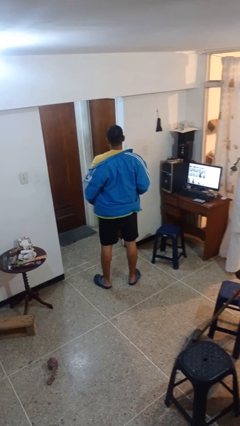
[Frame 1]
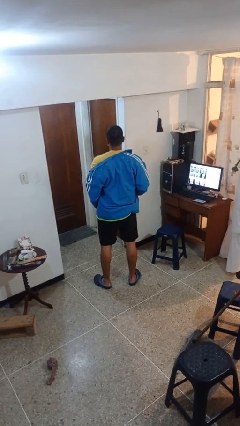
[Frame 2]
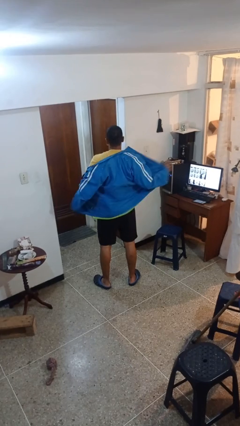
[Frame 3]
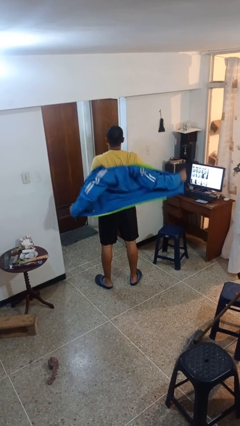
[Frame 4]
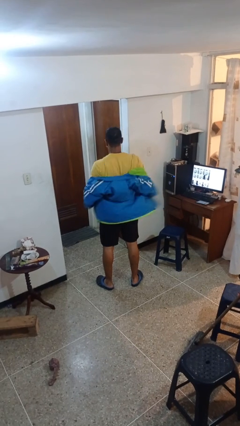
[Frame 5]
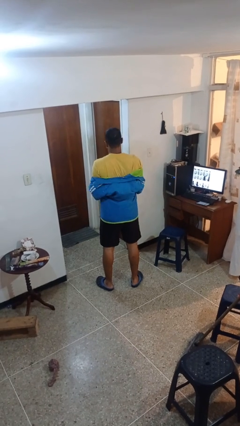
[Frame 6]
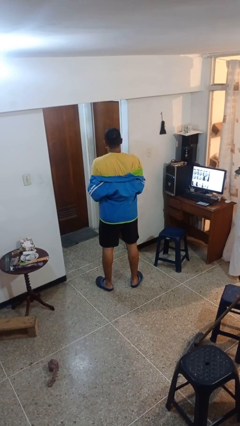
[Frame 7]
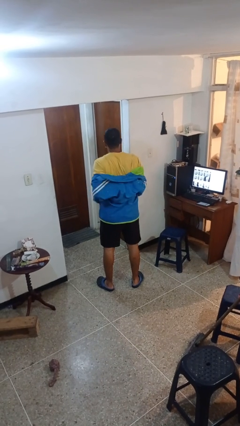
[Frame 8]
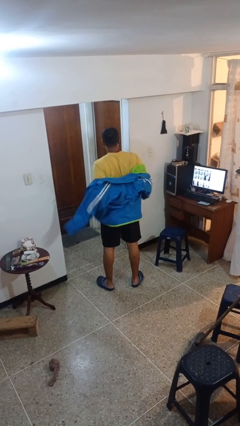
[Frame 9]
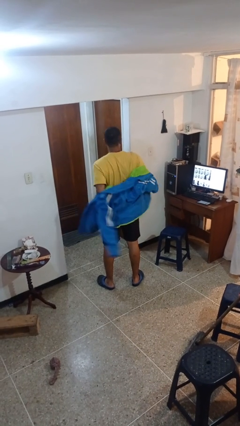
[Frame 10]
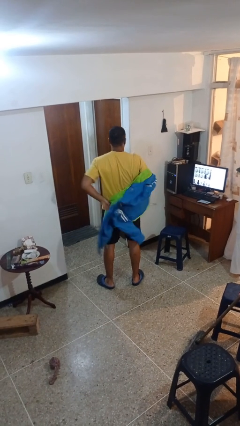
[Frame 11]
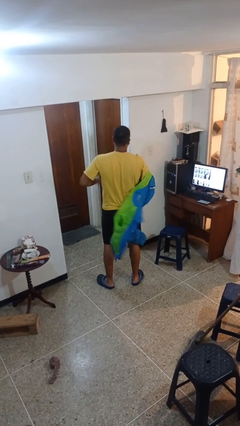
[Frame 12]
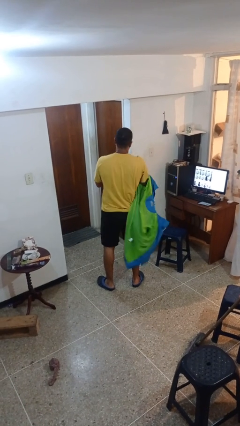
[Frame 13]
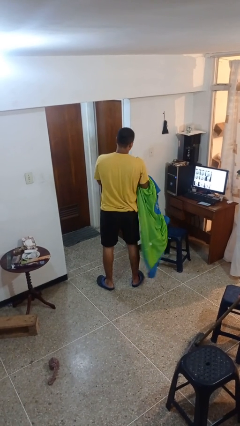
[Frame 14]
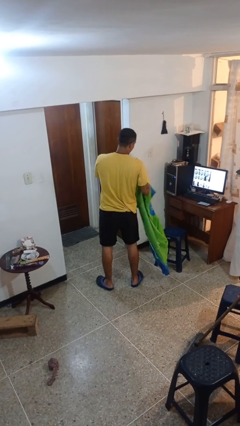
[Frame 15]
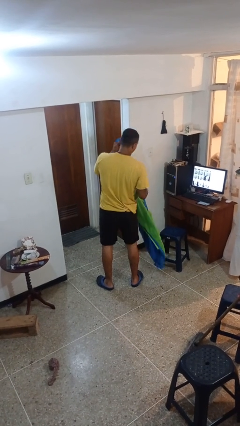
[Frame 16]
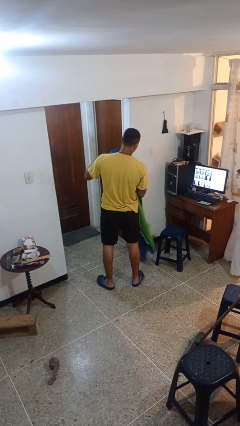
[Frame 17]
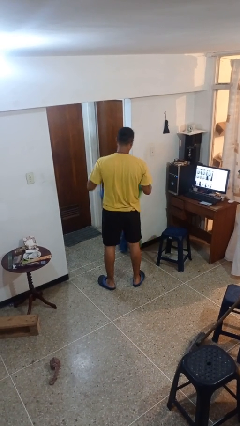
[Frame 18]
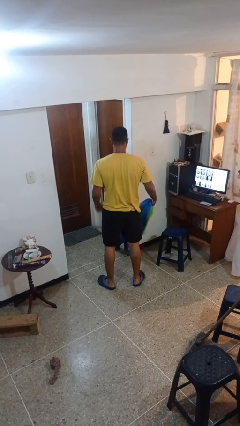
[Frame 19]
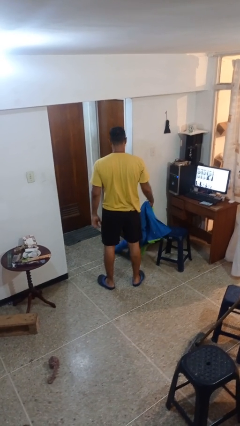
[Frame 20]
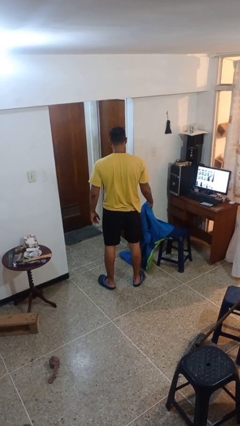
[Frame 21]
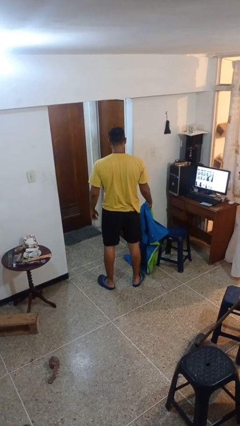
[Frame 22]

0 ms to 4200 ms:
person takes off jacket

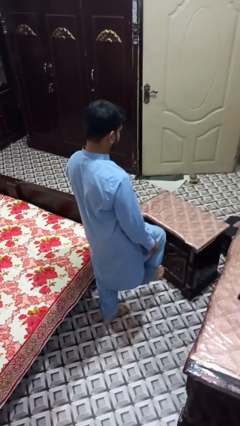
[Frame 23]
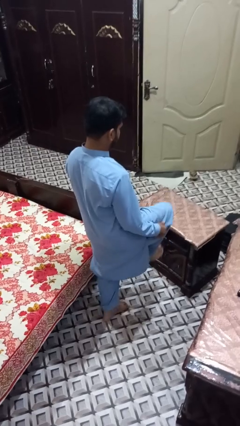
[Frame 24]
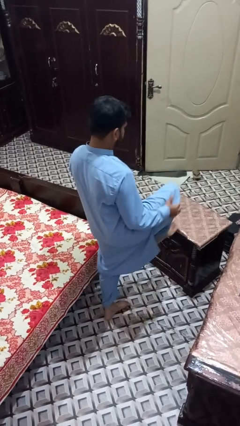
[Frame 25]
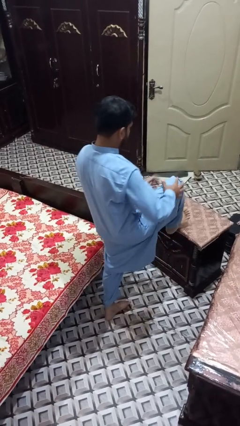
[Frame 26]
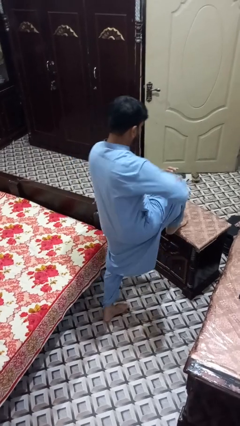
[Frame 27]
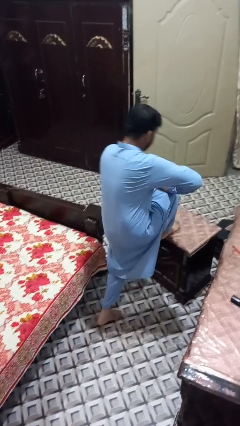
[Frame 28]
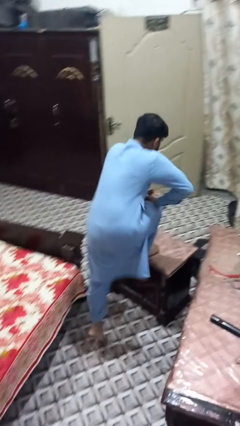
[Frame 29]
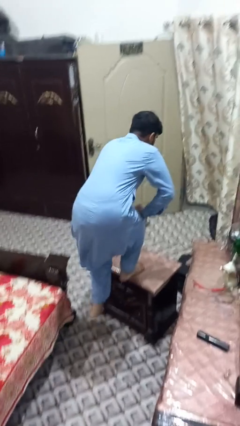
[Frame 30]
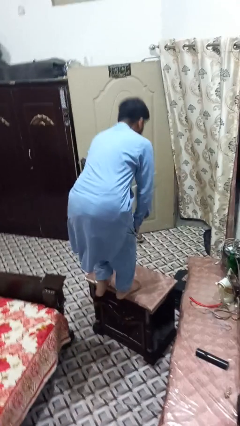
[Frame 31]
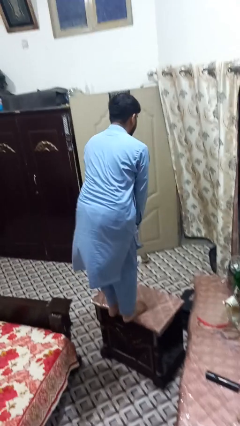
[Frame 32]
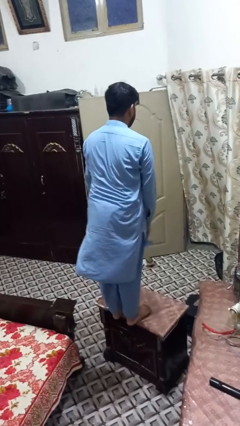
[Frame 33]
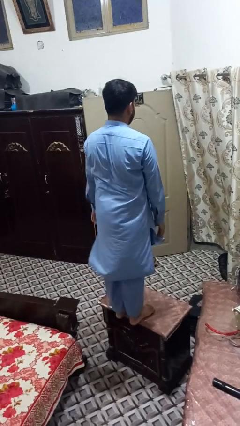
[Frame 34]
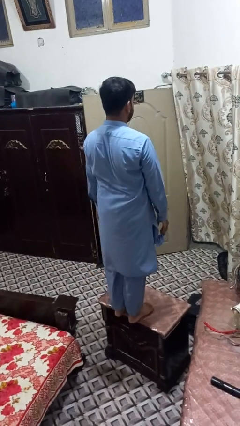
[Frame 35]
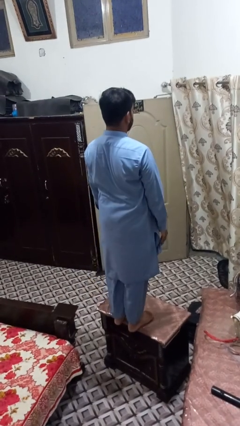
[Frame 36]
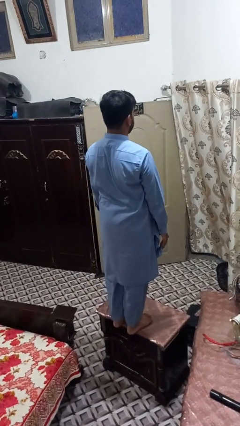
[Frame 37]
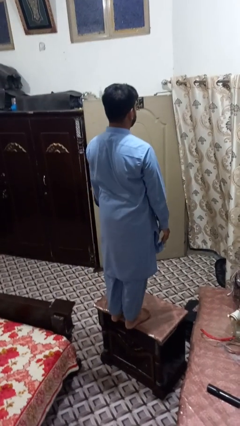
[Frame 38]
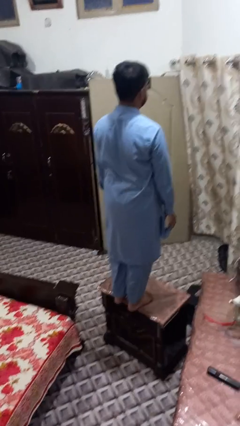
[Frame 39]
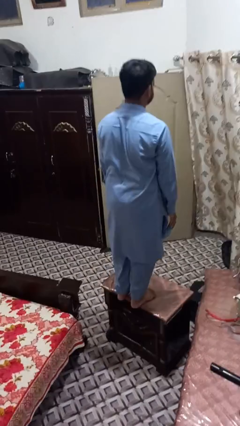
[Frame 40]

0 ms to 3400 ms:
person climbs on table

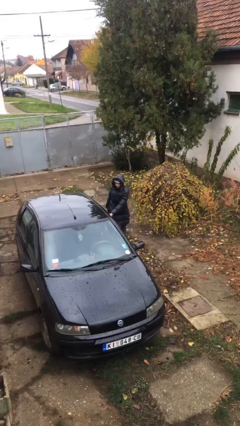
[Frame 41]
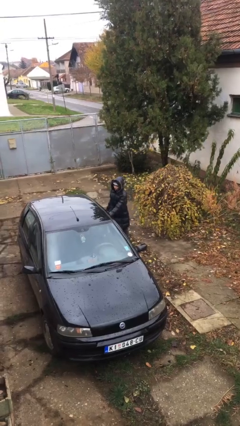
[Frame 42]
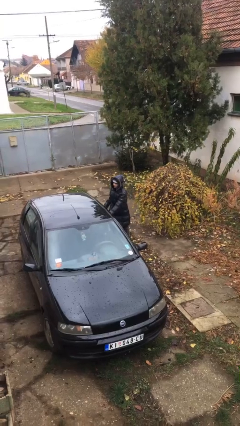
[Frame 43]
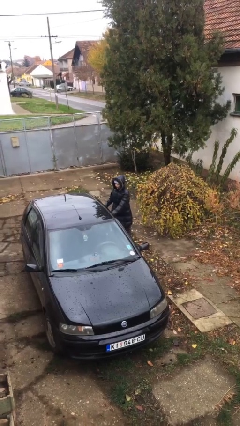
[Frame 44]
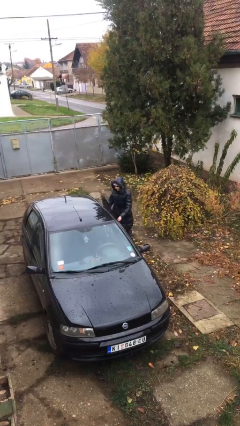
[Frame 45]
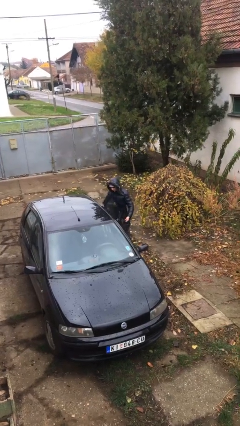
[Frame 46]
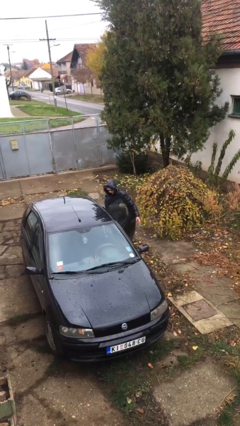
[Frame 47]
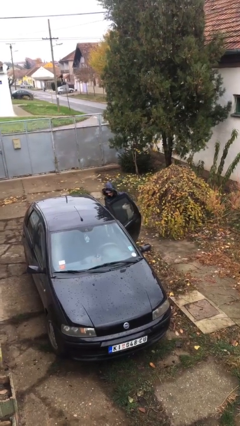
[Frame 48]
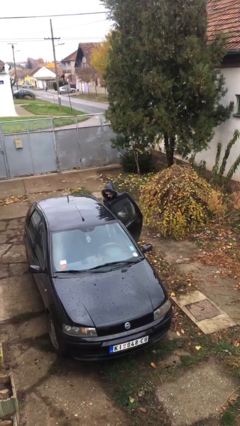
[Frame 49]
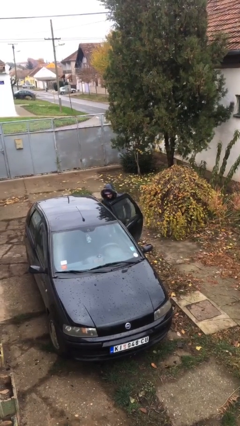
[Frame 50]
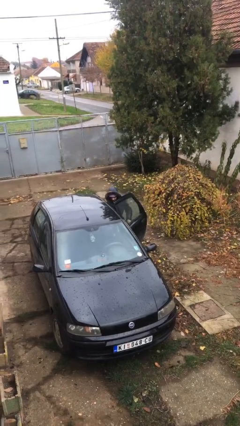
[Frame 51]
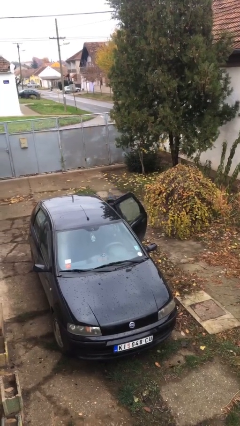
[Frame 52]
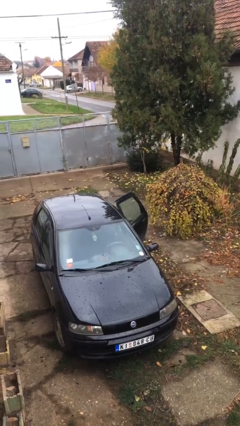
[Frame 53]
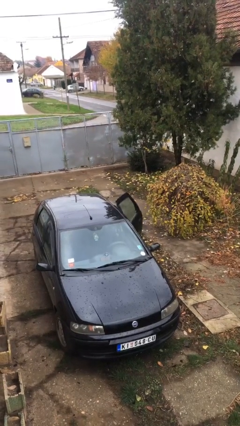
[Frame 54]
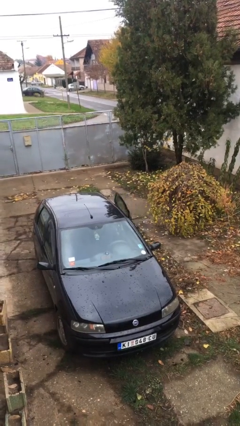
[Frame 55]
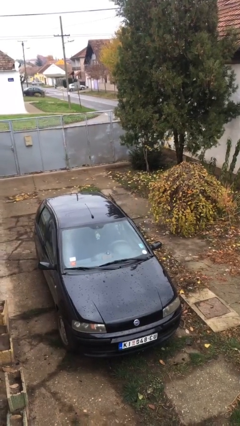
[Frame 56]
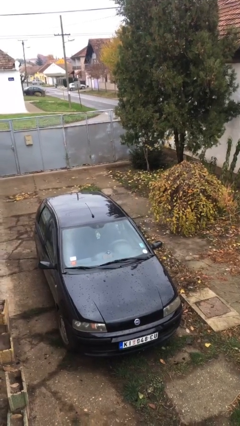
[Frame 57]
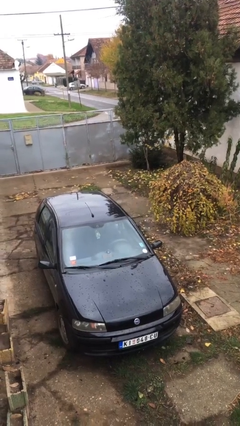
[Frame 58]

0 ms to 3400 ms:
person enters car

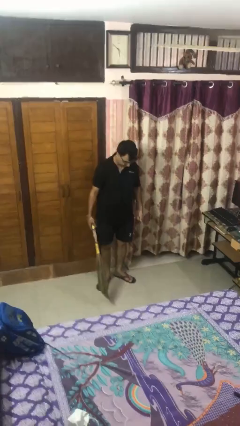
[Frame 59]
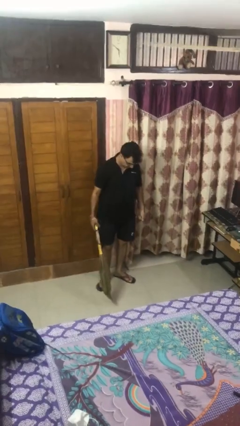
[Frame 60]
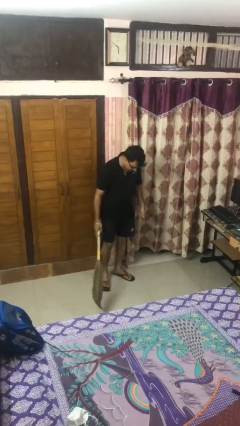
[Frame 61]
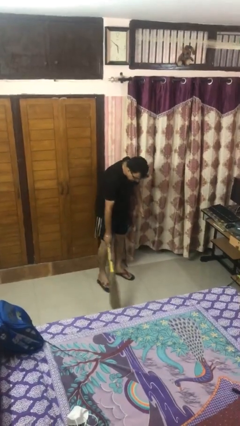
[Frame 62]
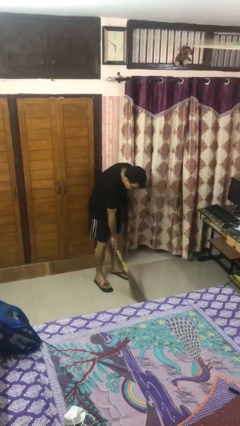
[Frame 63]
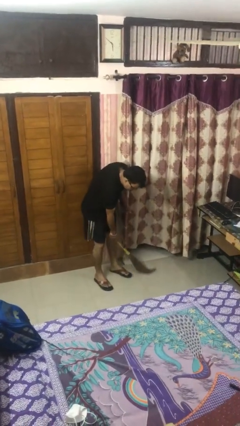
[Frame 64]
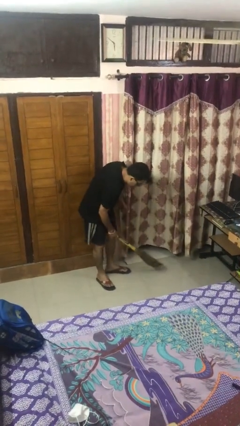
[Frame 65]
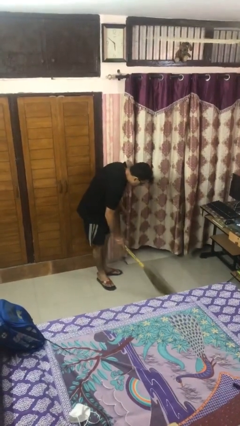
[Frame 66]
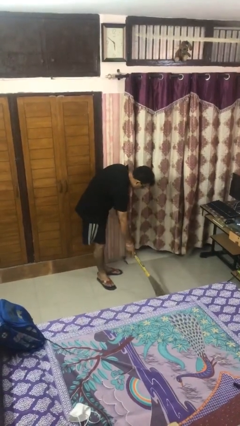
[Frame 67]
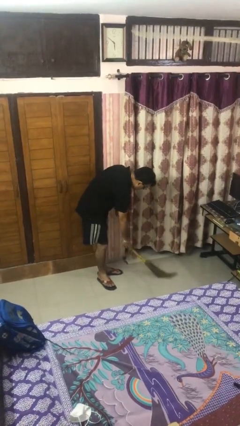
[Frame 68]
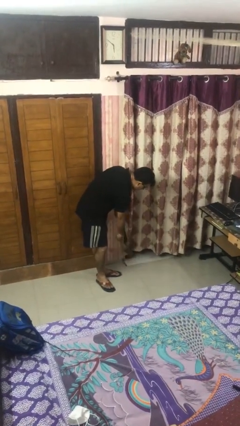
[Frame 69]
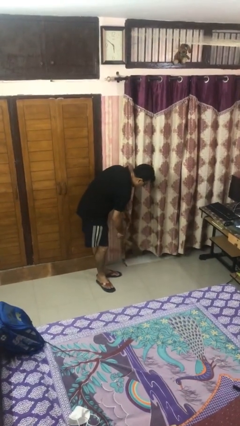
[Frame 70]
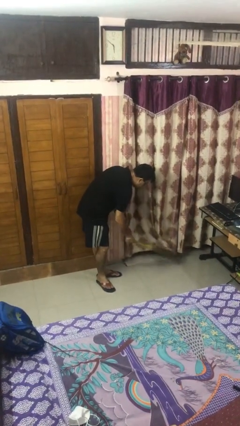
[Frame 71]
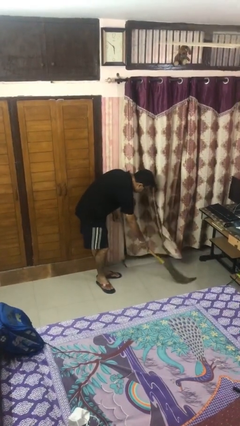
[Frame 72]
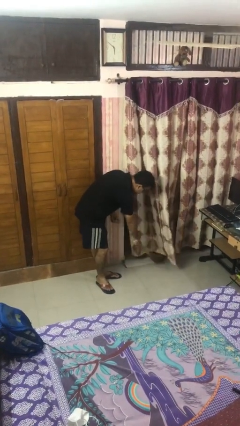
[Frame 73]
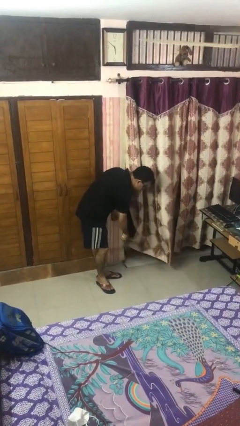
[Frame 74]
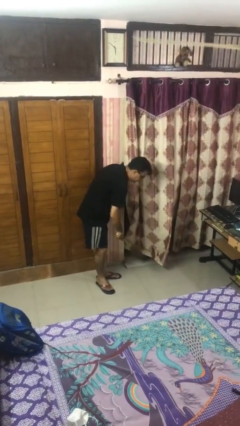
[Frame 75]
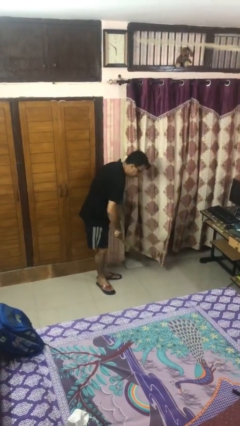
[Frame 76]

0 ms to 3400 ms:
person sweeps floor

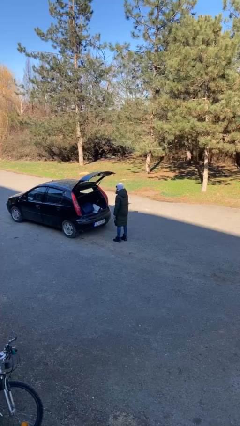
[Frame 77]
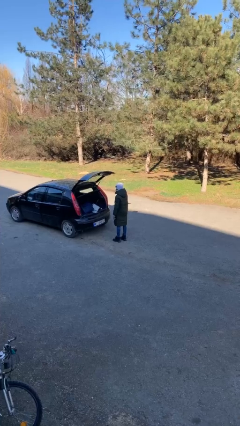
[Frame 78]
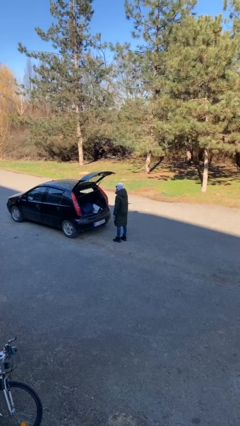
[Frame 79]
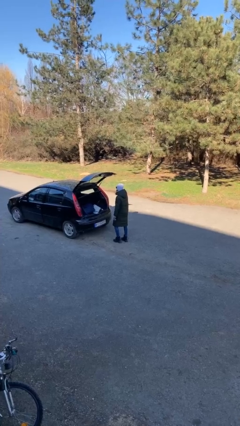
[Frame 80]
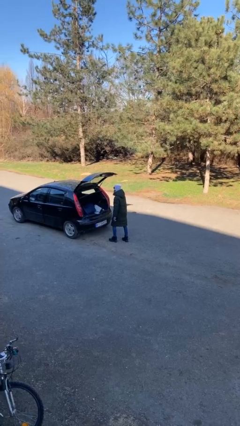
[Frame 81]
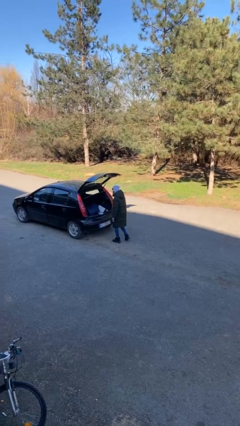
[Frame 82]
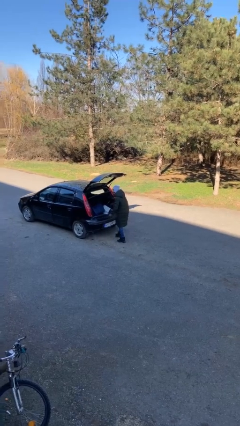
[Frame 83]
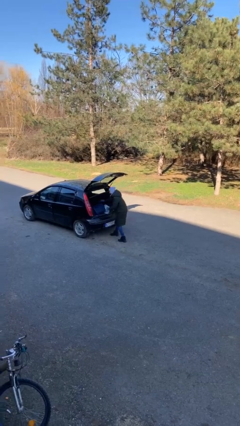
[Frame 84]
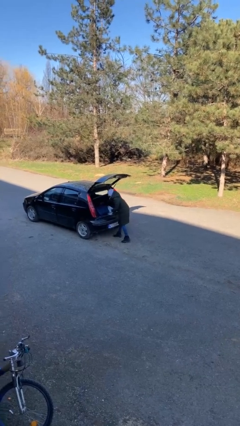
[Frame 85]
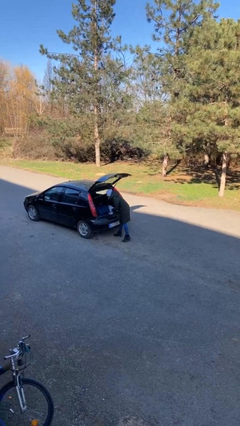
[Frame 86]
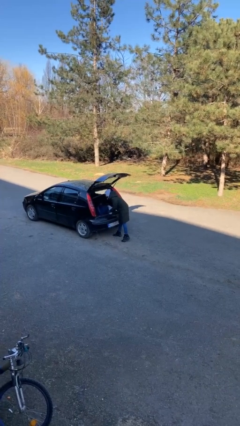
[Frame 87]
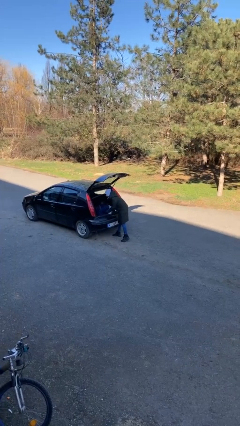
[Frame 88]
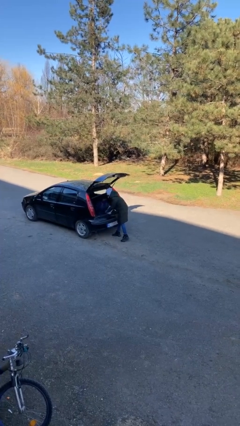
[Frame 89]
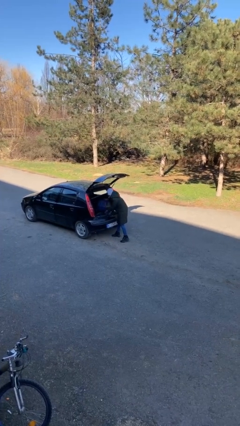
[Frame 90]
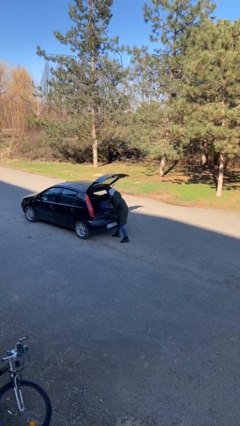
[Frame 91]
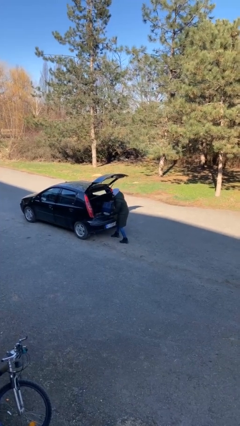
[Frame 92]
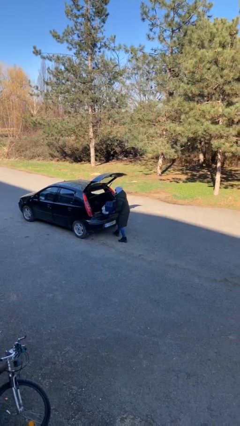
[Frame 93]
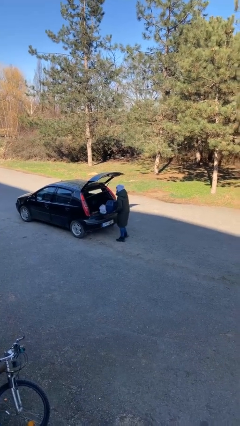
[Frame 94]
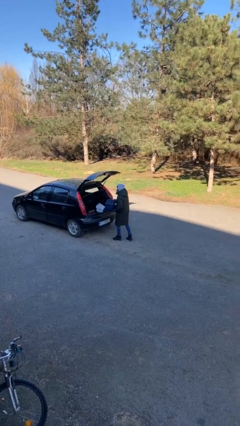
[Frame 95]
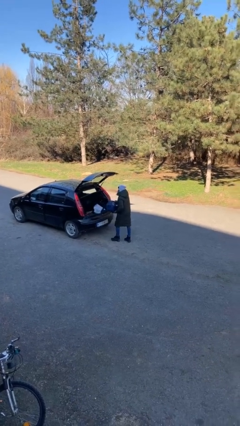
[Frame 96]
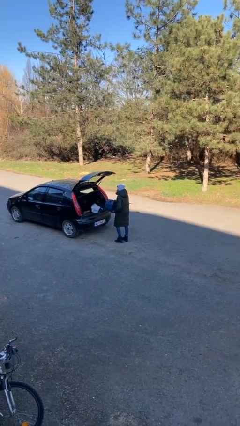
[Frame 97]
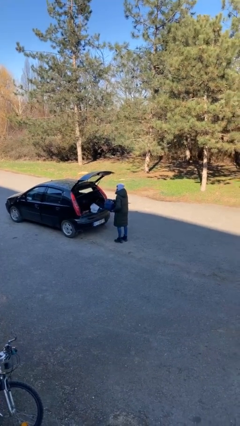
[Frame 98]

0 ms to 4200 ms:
person unloads car
